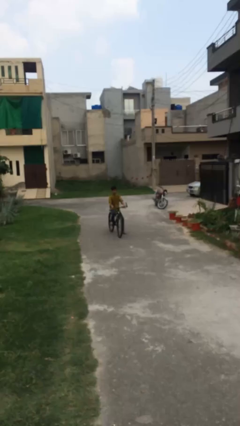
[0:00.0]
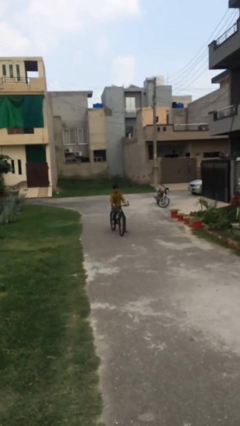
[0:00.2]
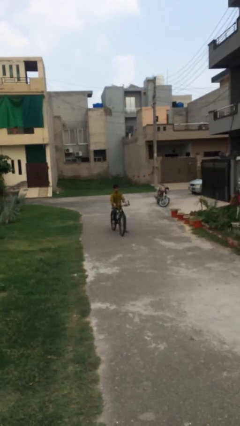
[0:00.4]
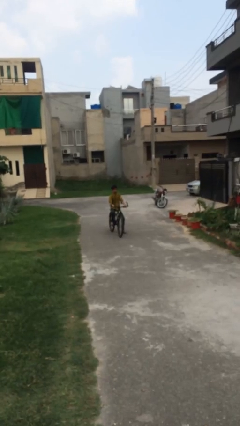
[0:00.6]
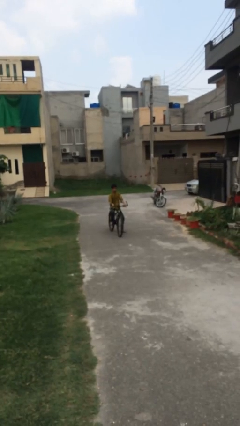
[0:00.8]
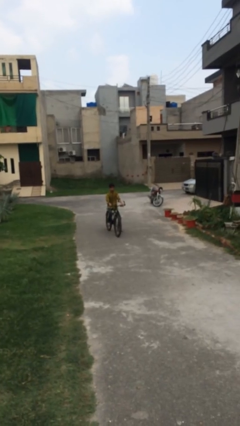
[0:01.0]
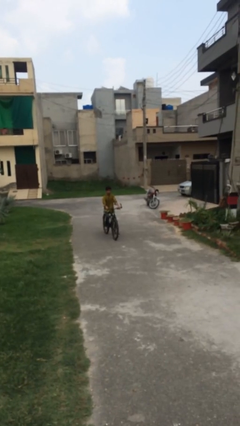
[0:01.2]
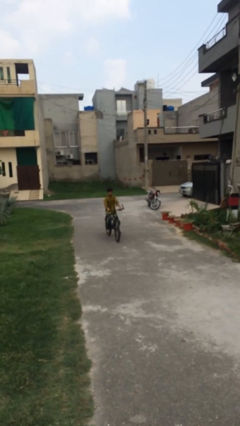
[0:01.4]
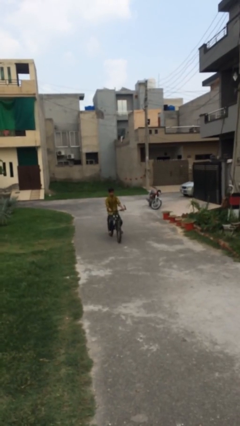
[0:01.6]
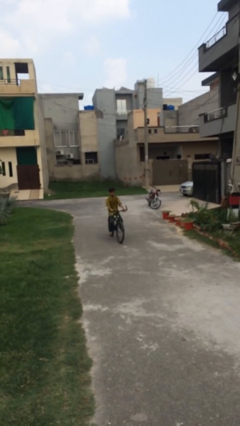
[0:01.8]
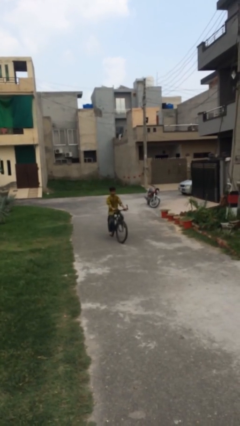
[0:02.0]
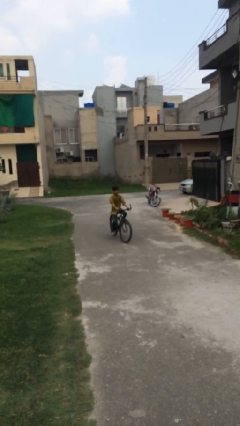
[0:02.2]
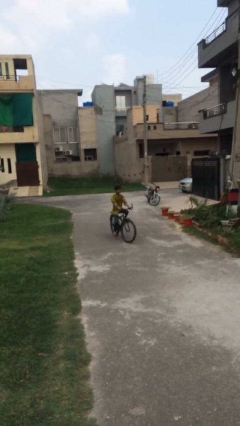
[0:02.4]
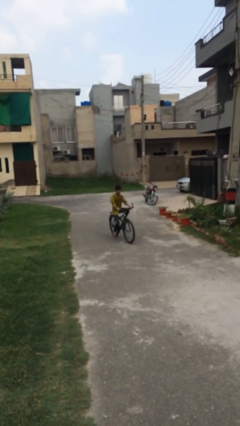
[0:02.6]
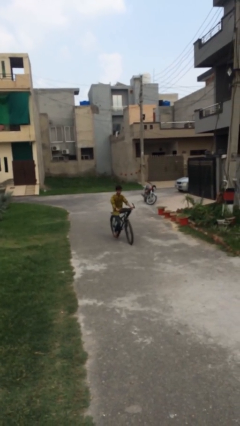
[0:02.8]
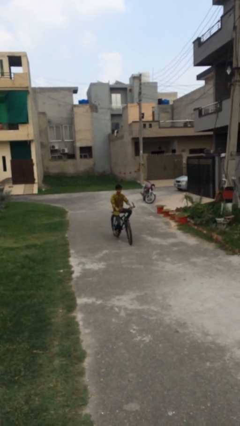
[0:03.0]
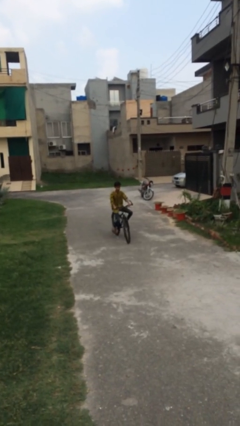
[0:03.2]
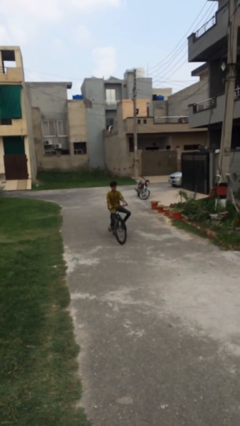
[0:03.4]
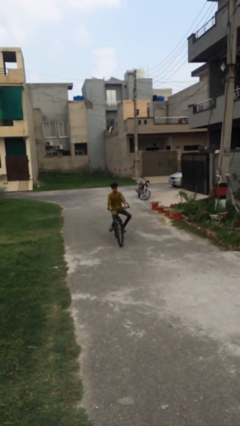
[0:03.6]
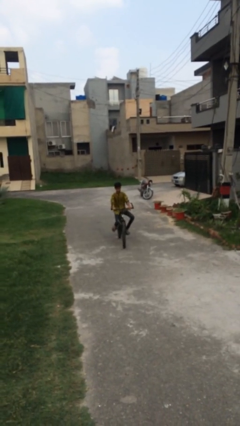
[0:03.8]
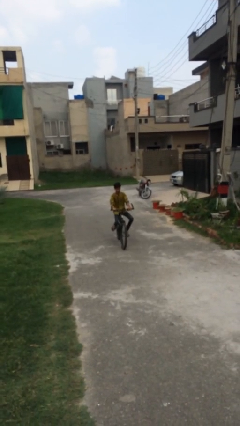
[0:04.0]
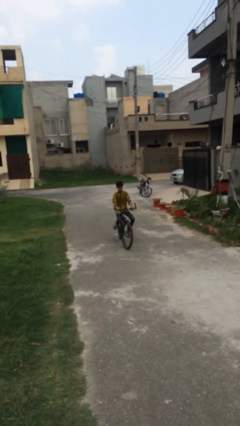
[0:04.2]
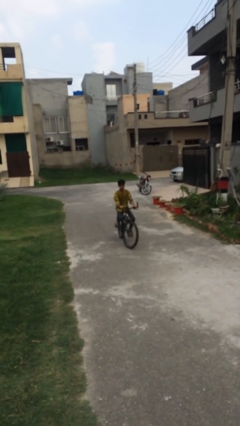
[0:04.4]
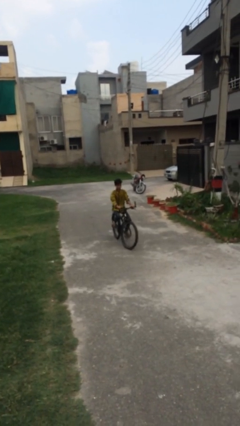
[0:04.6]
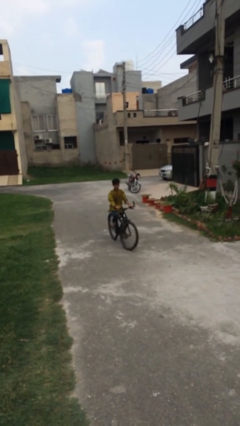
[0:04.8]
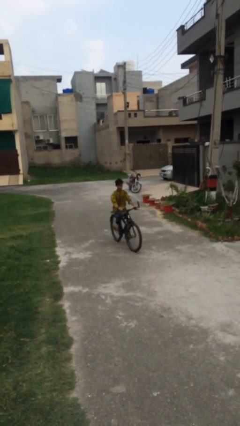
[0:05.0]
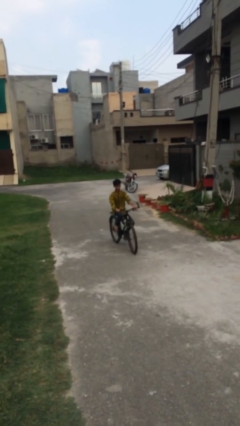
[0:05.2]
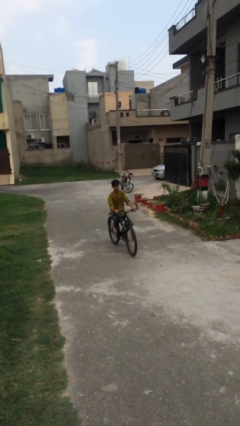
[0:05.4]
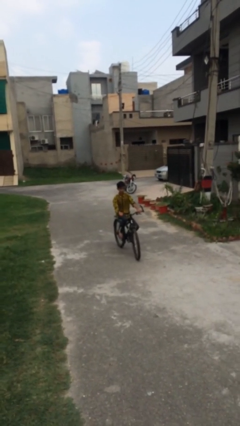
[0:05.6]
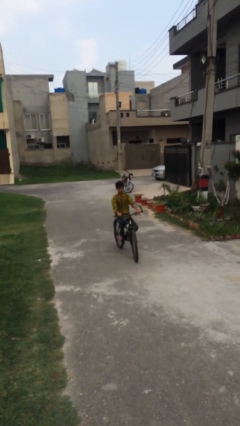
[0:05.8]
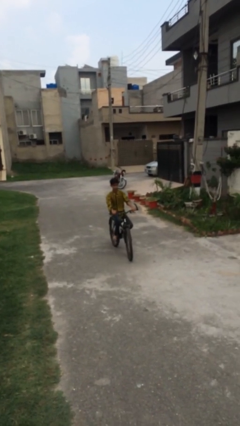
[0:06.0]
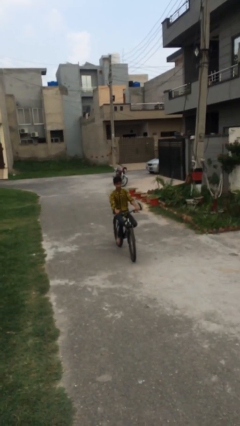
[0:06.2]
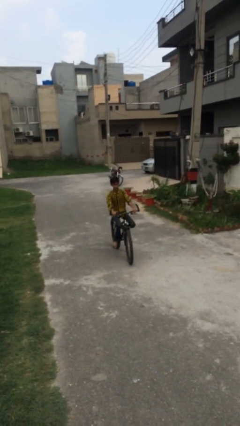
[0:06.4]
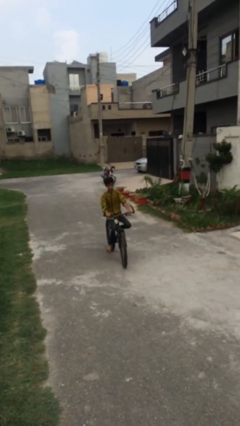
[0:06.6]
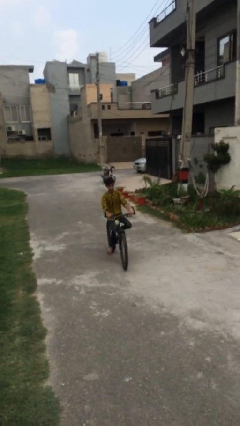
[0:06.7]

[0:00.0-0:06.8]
person rides bicycle

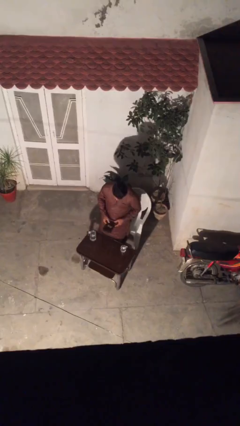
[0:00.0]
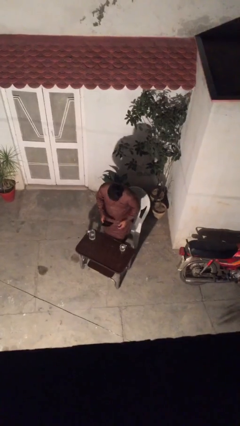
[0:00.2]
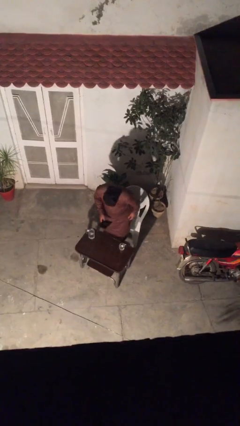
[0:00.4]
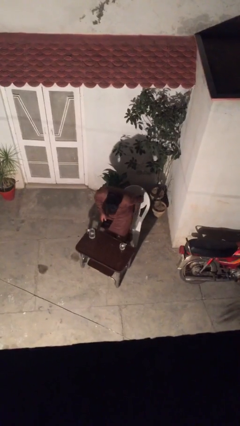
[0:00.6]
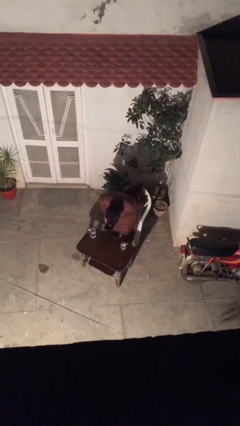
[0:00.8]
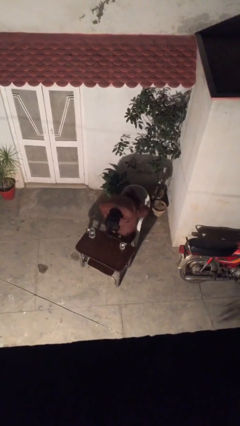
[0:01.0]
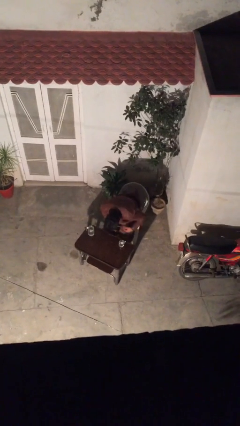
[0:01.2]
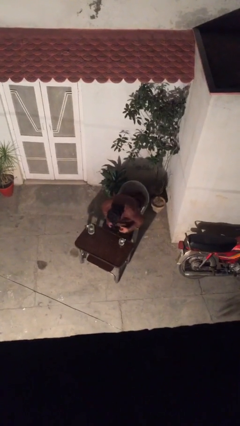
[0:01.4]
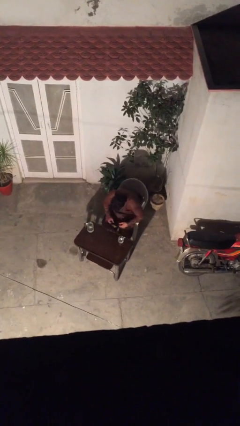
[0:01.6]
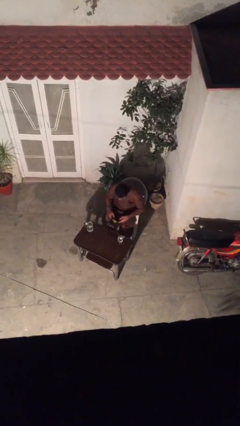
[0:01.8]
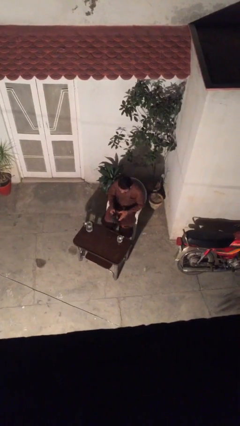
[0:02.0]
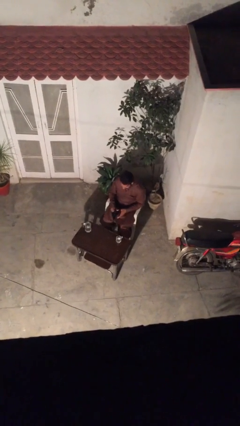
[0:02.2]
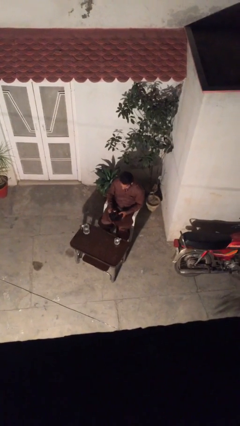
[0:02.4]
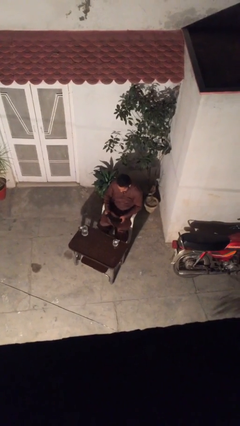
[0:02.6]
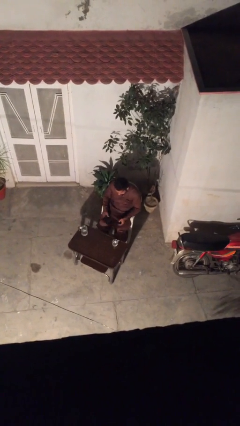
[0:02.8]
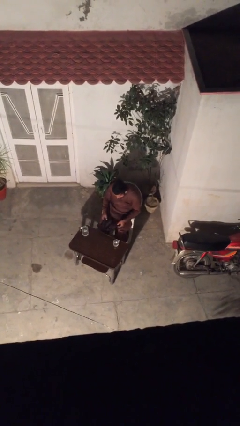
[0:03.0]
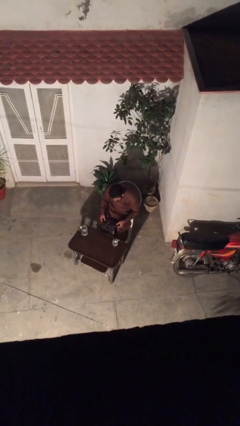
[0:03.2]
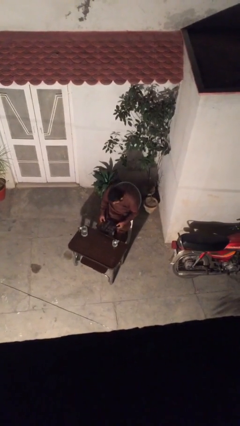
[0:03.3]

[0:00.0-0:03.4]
person sits down

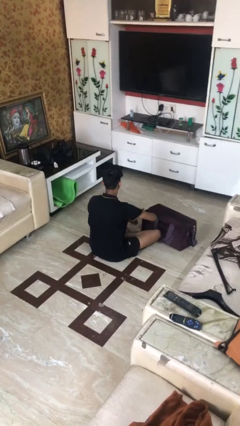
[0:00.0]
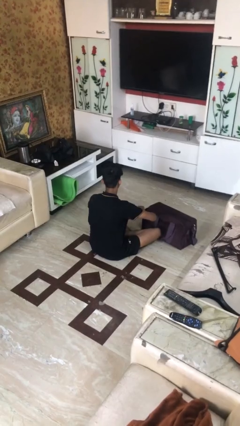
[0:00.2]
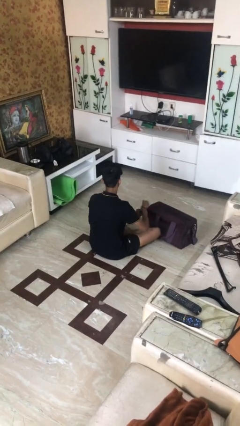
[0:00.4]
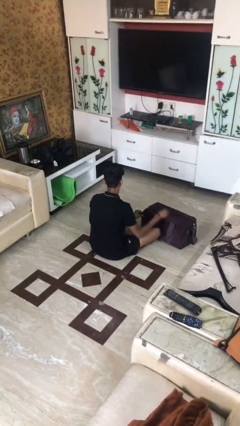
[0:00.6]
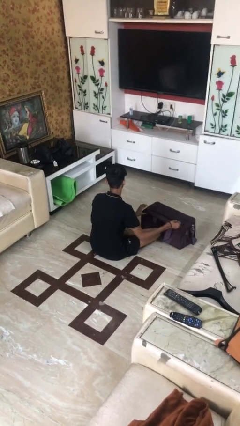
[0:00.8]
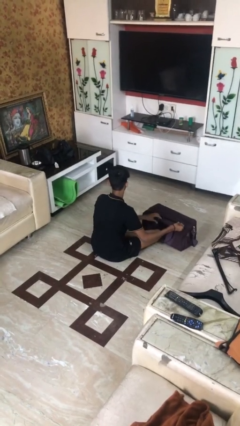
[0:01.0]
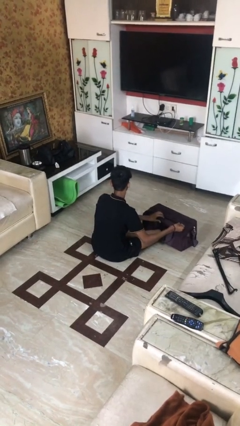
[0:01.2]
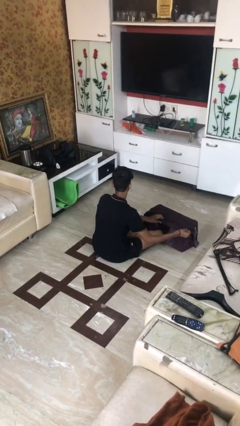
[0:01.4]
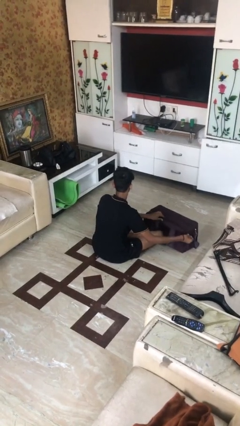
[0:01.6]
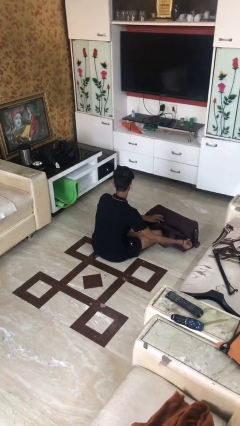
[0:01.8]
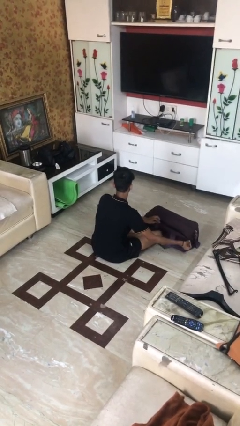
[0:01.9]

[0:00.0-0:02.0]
person opens suitcase

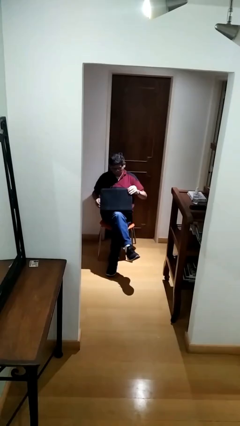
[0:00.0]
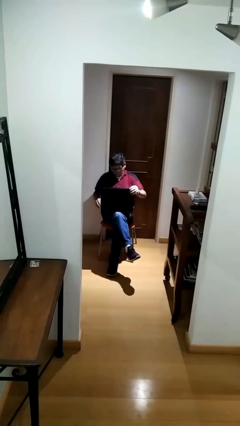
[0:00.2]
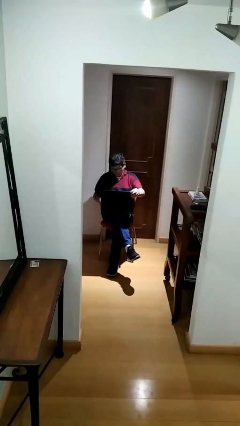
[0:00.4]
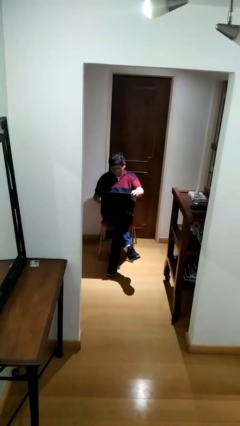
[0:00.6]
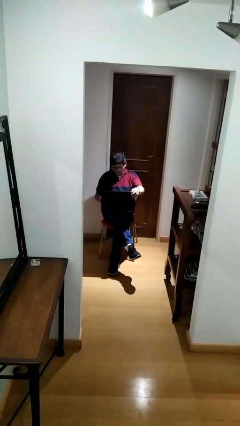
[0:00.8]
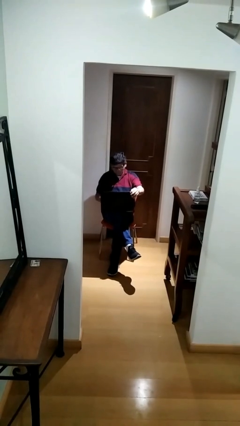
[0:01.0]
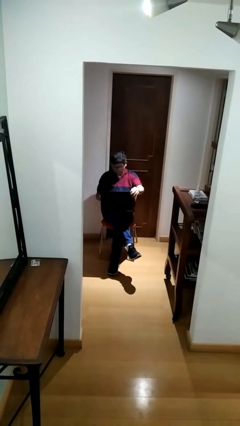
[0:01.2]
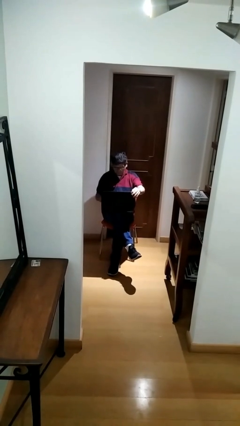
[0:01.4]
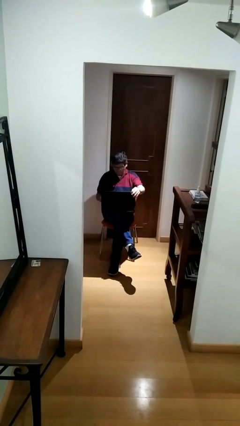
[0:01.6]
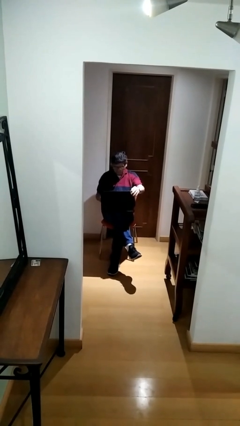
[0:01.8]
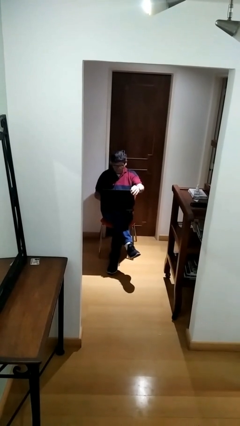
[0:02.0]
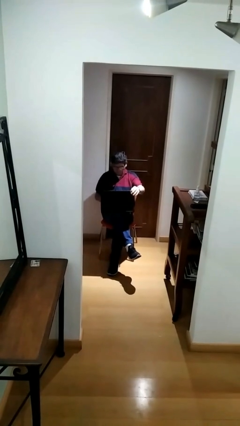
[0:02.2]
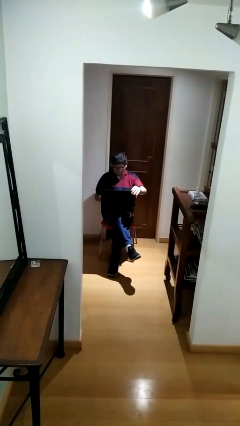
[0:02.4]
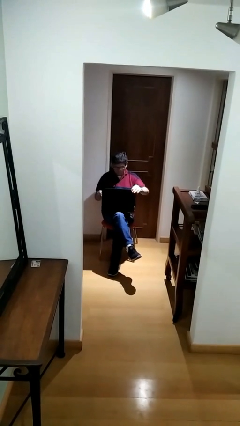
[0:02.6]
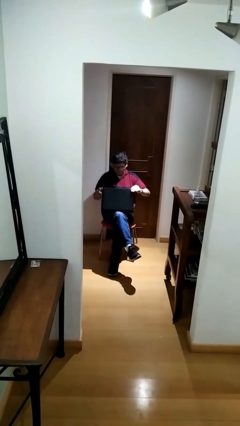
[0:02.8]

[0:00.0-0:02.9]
person interacts with laptop

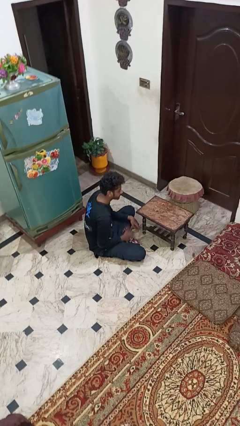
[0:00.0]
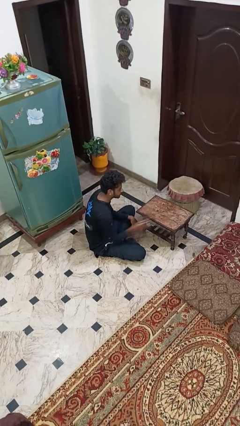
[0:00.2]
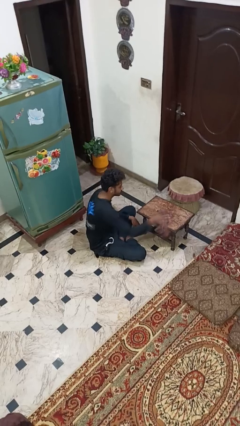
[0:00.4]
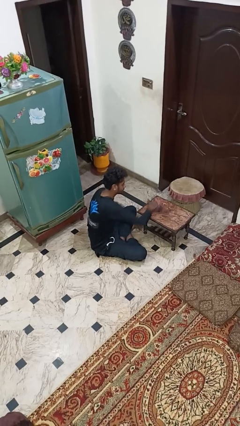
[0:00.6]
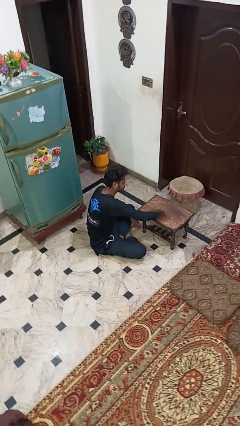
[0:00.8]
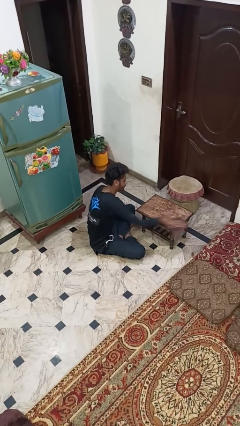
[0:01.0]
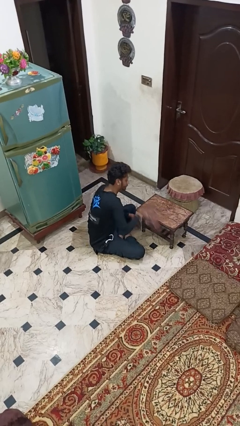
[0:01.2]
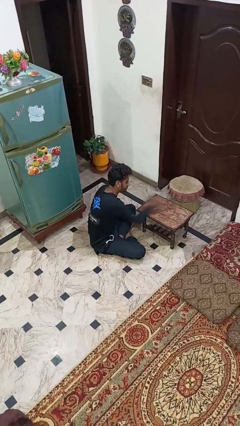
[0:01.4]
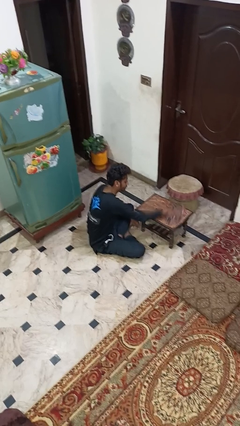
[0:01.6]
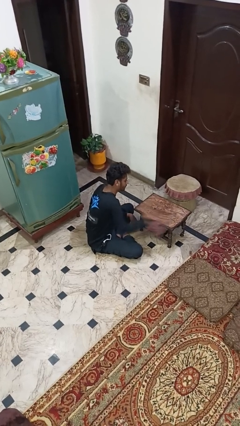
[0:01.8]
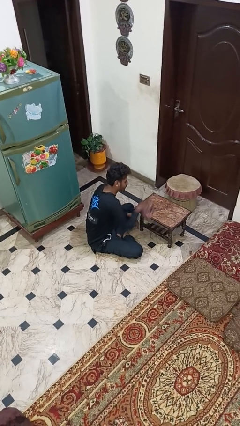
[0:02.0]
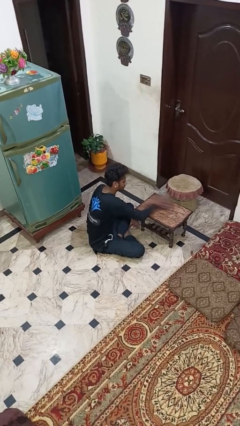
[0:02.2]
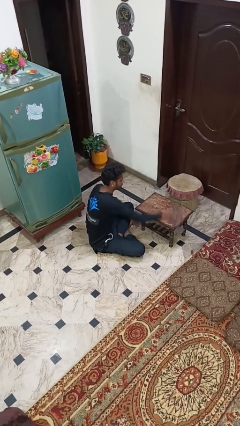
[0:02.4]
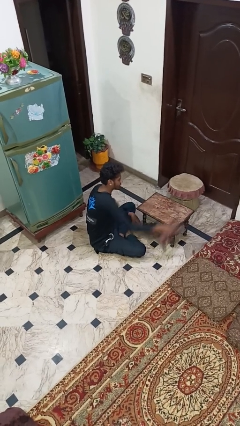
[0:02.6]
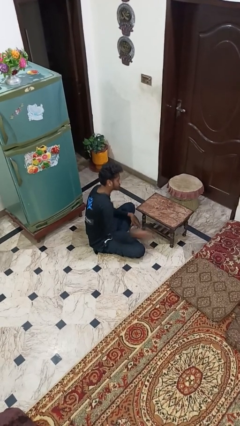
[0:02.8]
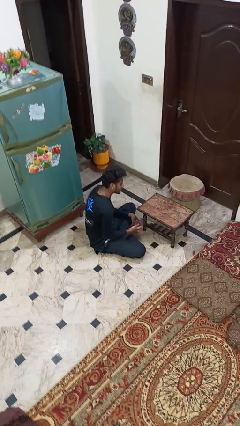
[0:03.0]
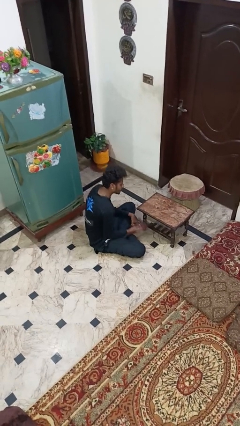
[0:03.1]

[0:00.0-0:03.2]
person cleans table with rag
